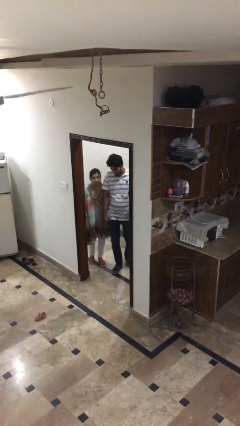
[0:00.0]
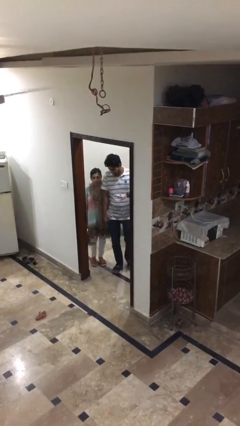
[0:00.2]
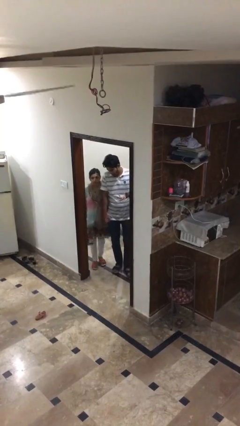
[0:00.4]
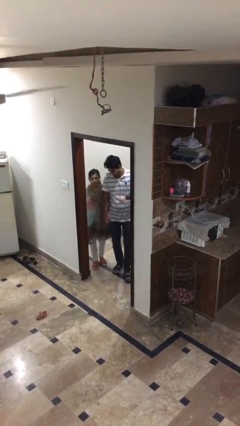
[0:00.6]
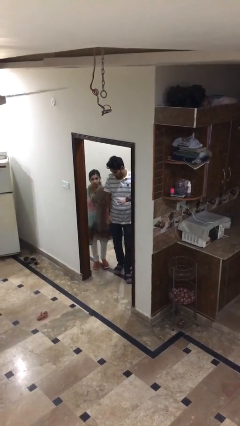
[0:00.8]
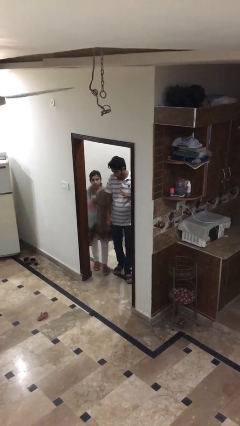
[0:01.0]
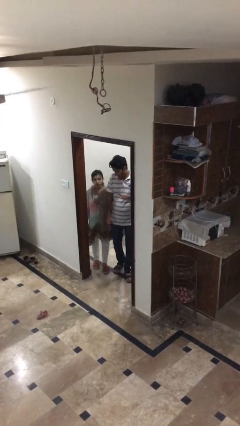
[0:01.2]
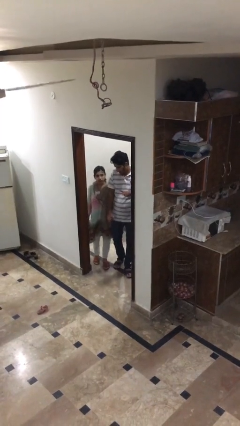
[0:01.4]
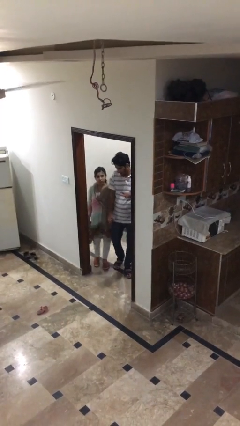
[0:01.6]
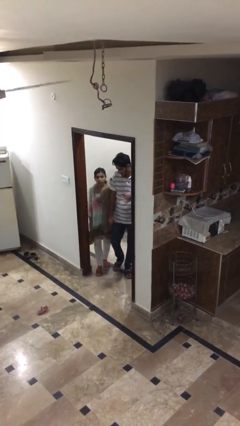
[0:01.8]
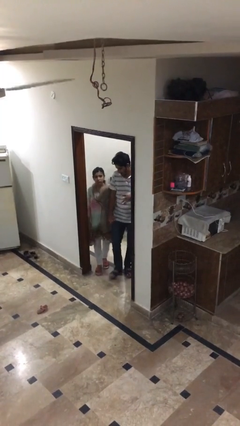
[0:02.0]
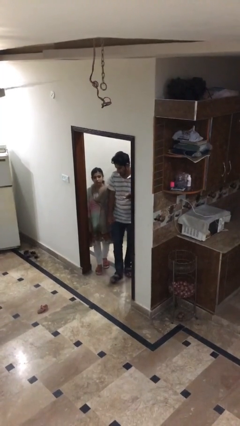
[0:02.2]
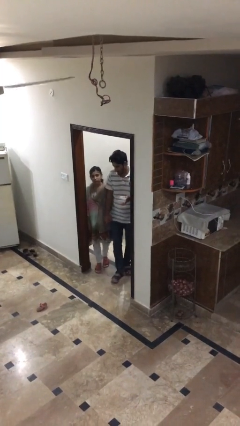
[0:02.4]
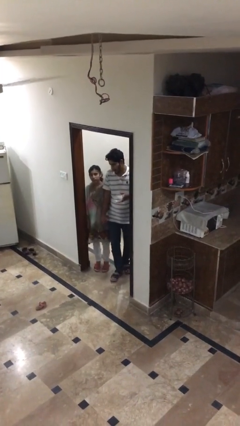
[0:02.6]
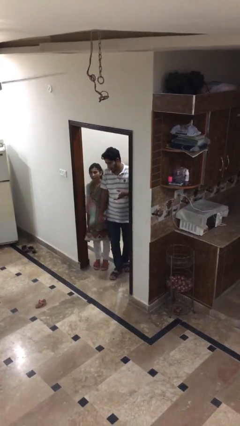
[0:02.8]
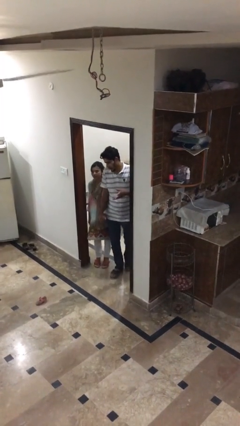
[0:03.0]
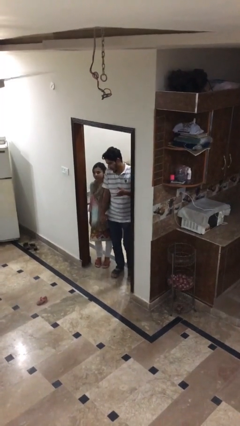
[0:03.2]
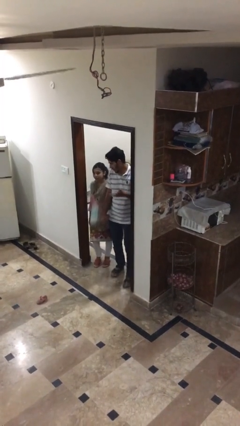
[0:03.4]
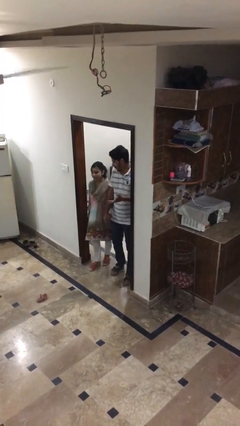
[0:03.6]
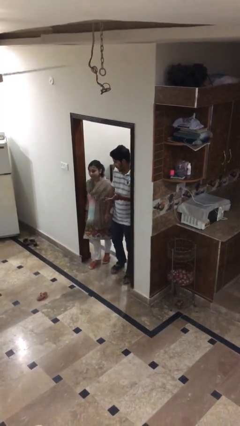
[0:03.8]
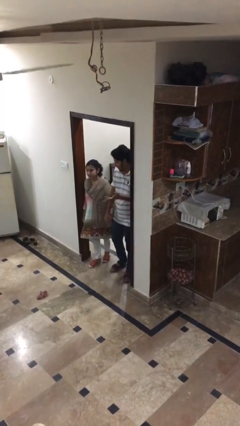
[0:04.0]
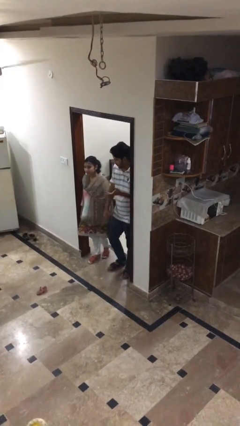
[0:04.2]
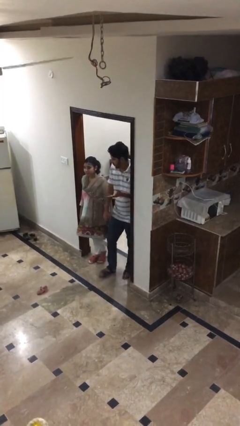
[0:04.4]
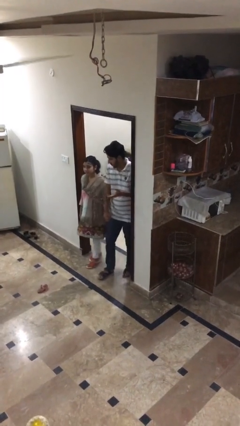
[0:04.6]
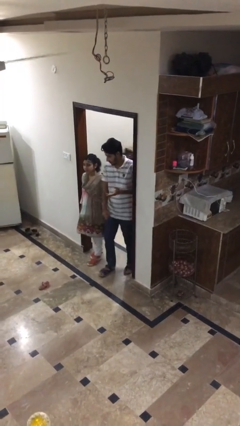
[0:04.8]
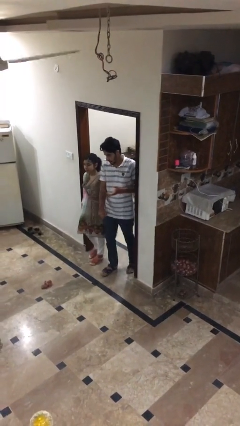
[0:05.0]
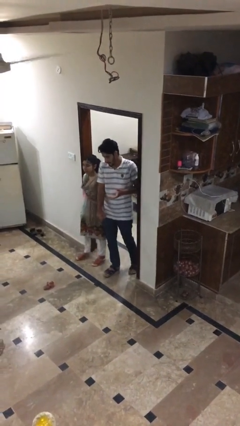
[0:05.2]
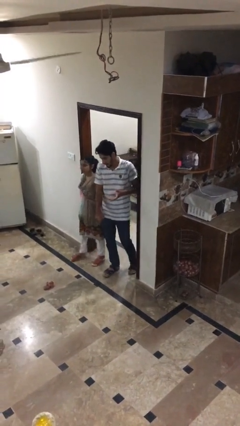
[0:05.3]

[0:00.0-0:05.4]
person holds hand

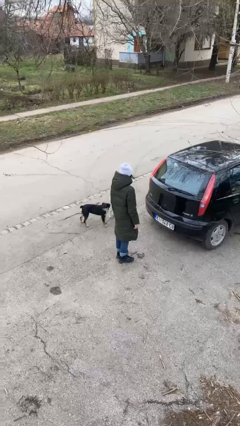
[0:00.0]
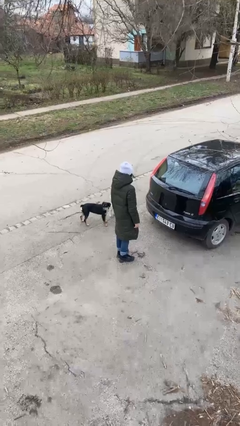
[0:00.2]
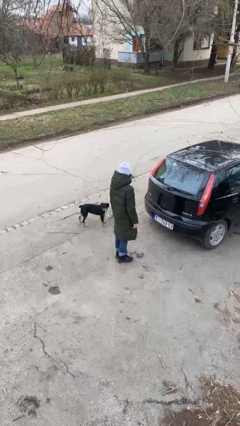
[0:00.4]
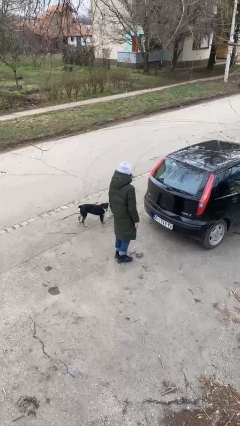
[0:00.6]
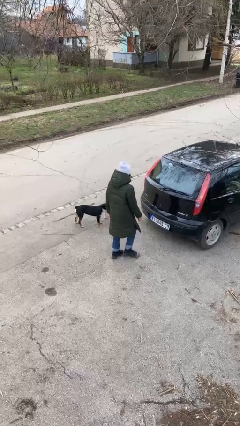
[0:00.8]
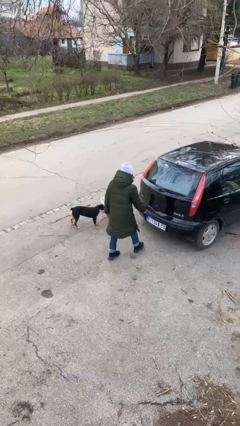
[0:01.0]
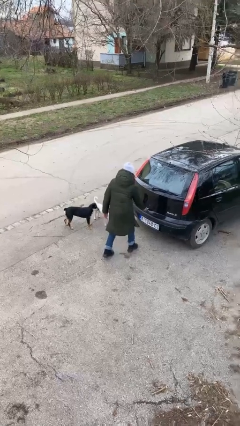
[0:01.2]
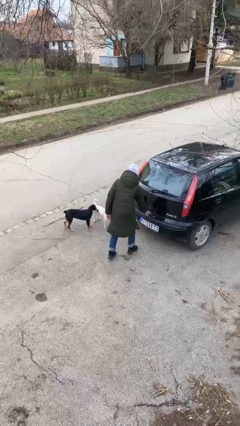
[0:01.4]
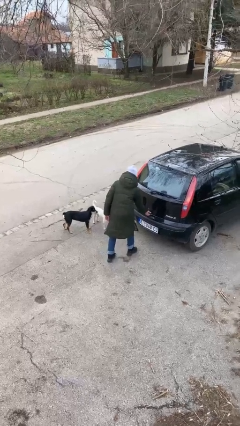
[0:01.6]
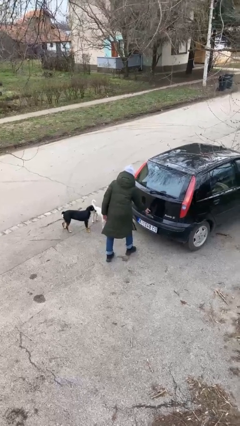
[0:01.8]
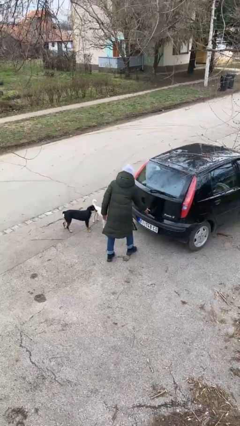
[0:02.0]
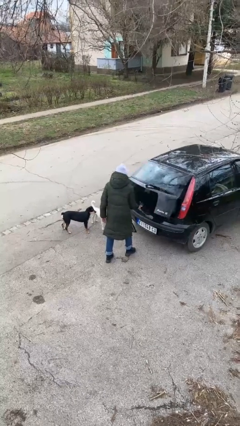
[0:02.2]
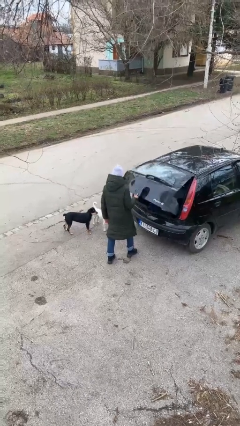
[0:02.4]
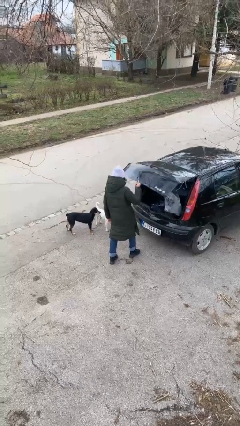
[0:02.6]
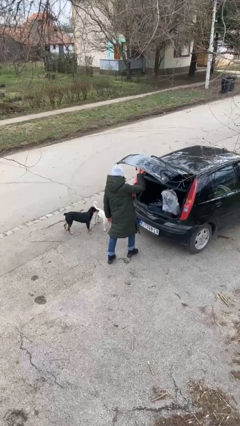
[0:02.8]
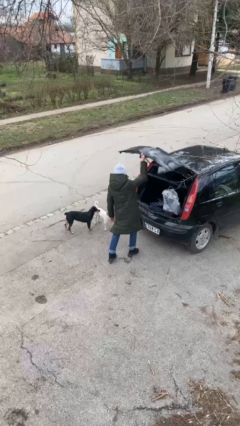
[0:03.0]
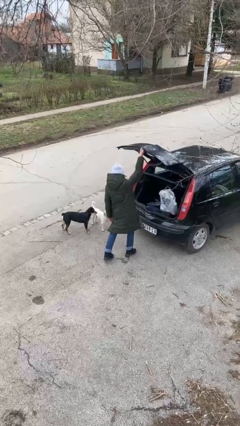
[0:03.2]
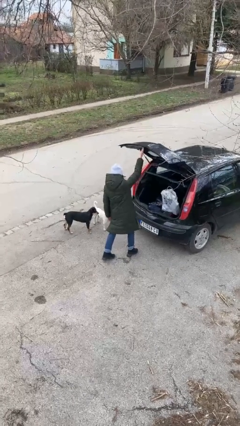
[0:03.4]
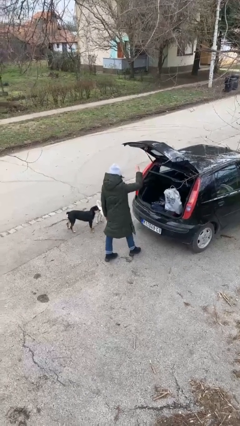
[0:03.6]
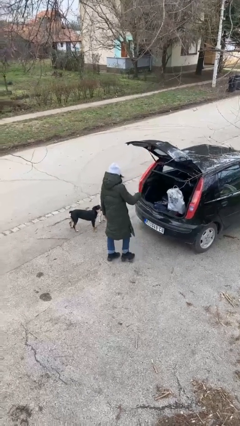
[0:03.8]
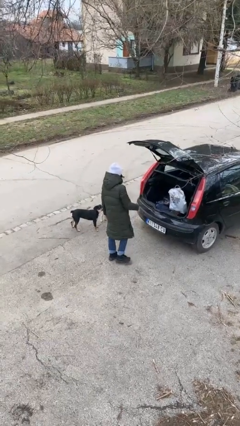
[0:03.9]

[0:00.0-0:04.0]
person opens car trunk

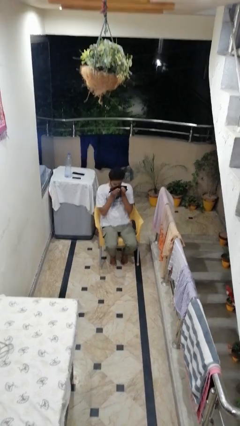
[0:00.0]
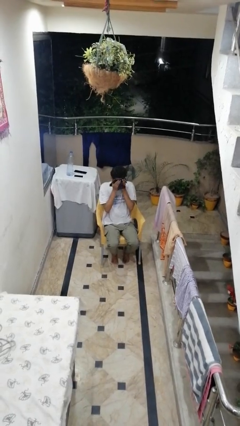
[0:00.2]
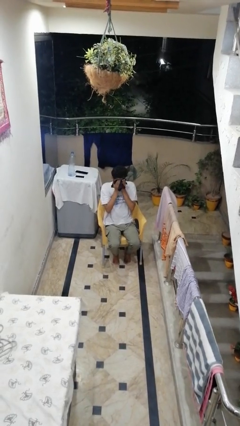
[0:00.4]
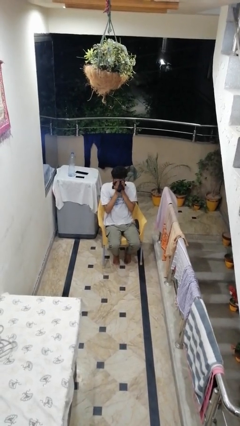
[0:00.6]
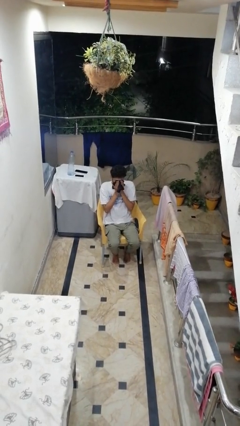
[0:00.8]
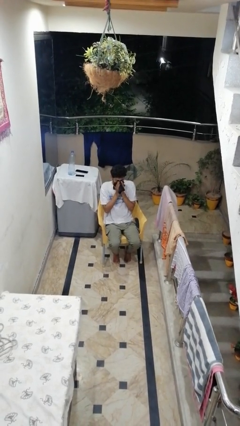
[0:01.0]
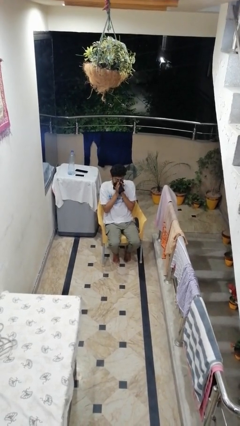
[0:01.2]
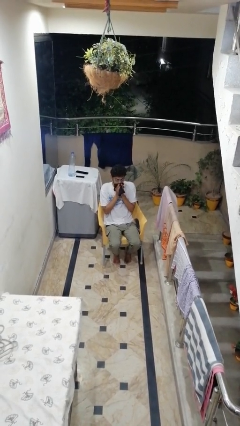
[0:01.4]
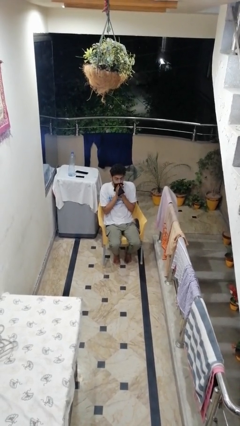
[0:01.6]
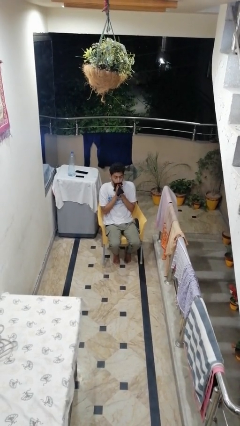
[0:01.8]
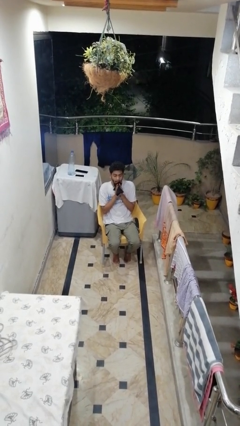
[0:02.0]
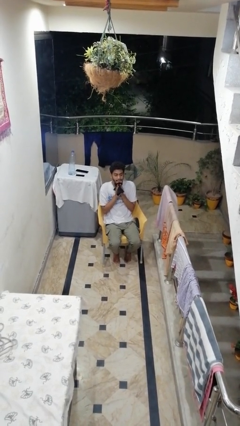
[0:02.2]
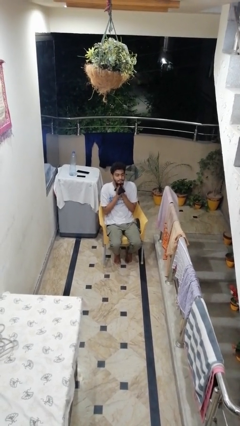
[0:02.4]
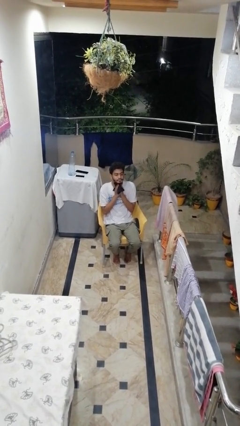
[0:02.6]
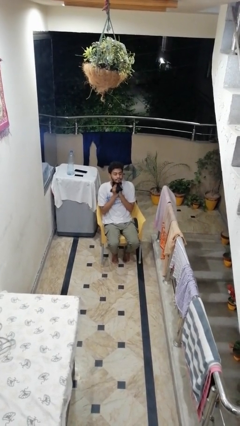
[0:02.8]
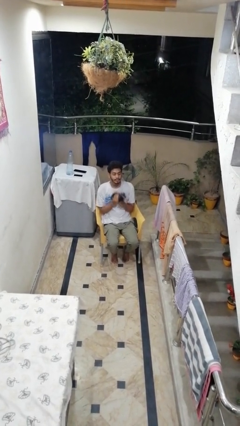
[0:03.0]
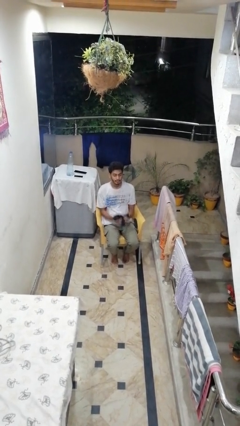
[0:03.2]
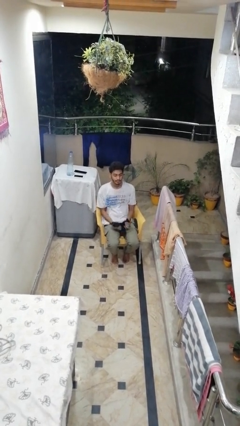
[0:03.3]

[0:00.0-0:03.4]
person wipes mouth with napkin

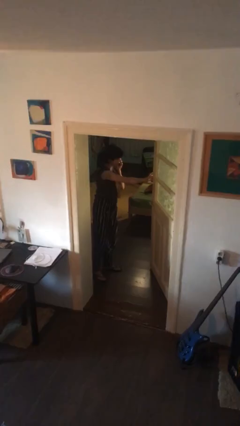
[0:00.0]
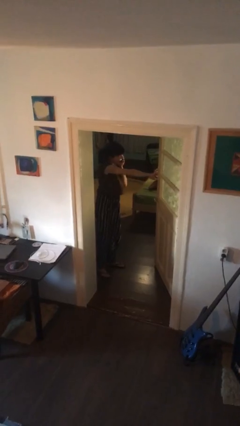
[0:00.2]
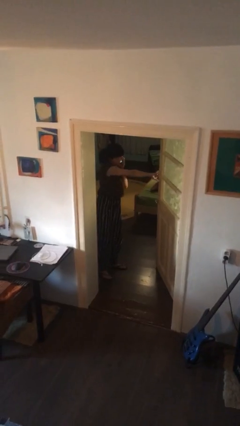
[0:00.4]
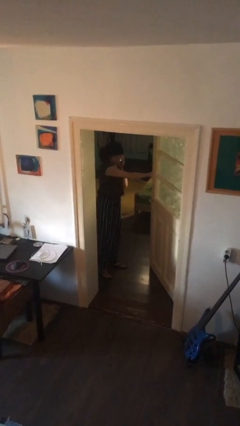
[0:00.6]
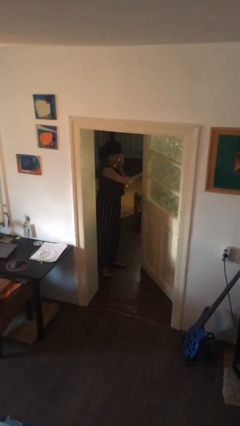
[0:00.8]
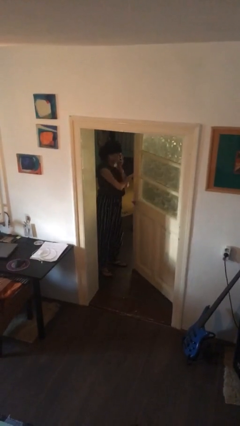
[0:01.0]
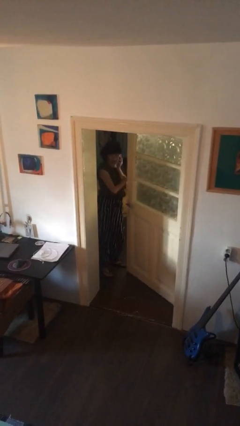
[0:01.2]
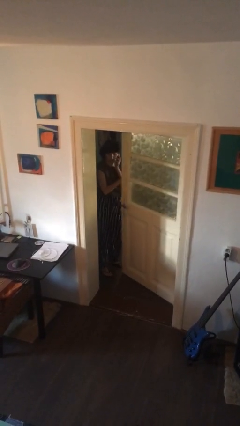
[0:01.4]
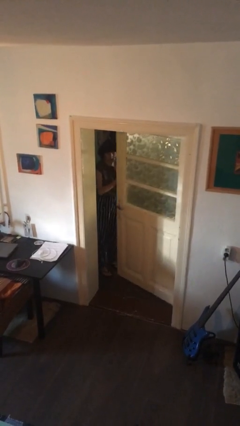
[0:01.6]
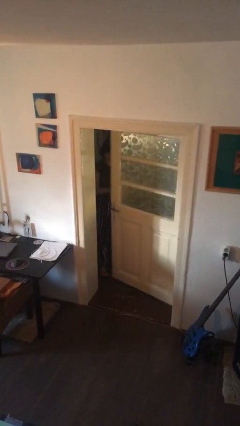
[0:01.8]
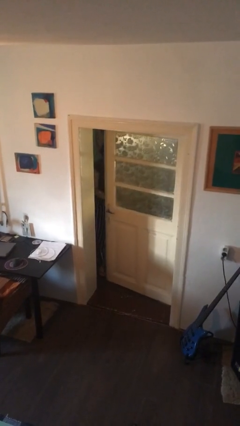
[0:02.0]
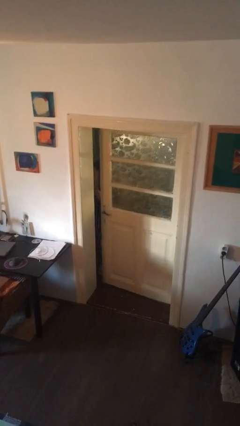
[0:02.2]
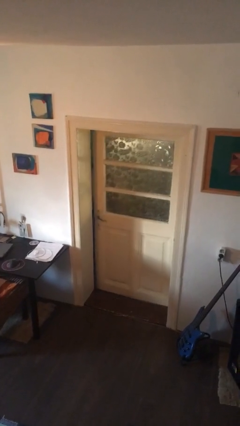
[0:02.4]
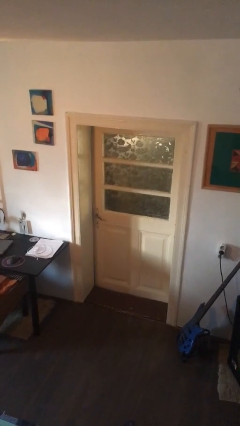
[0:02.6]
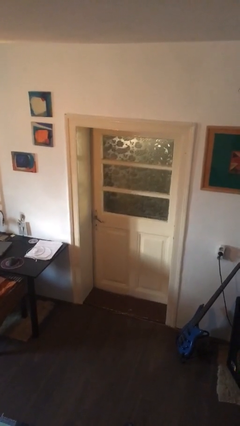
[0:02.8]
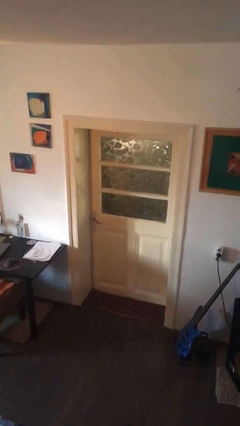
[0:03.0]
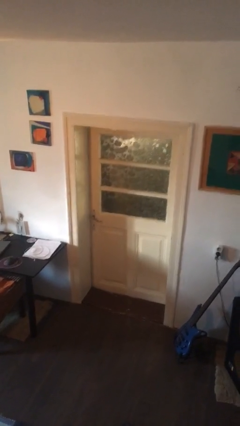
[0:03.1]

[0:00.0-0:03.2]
person closes facility door

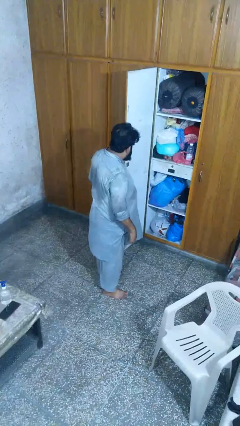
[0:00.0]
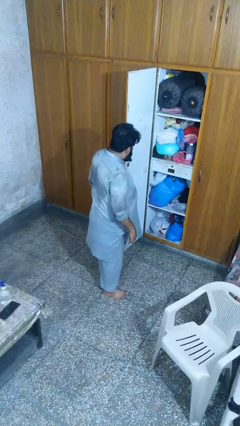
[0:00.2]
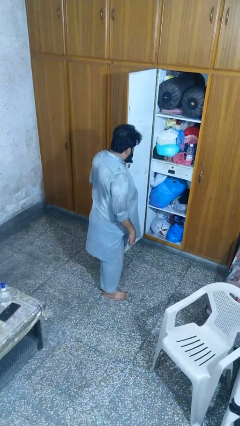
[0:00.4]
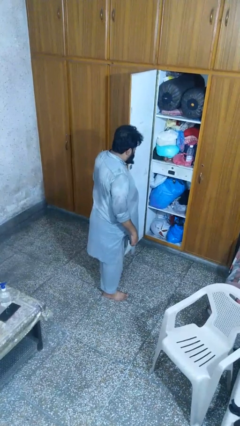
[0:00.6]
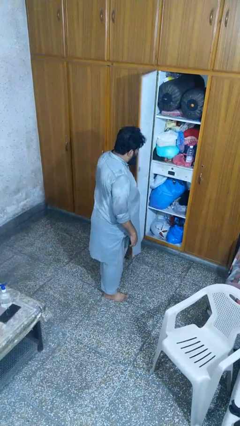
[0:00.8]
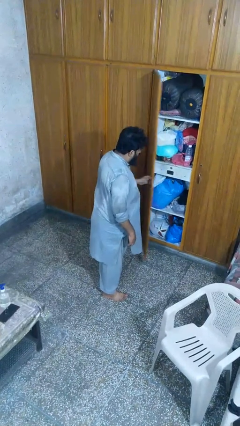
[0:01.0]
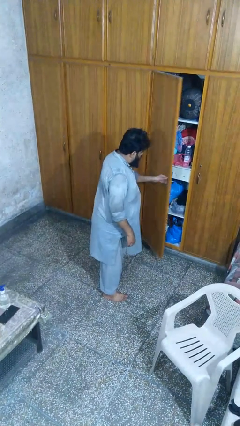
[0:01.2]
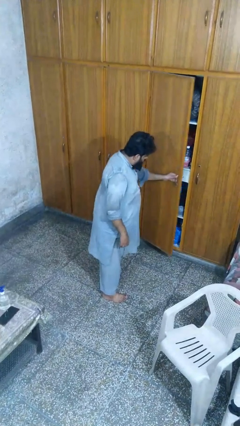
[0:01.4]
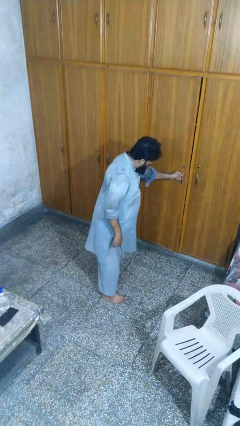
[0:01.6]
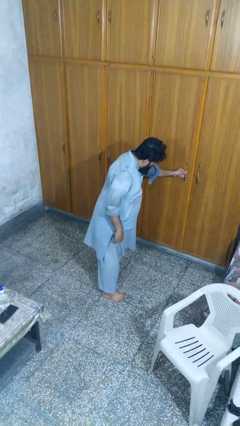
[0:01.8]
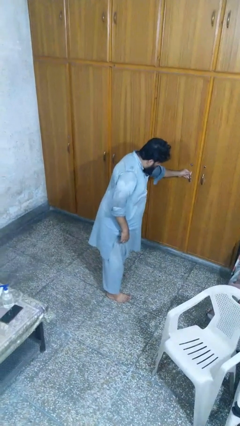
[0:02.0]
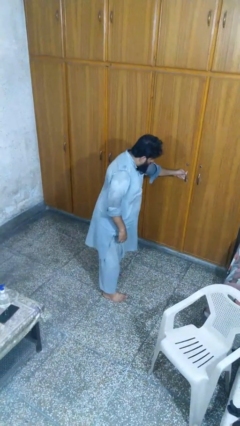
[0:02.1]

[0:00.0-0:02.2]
person closes closet door
